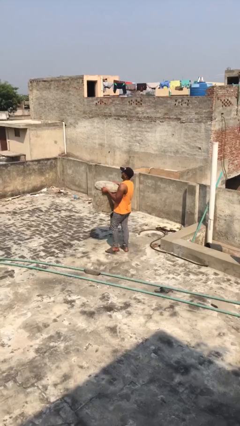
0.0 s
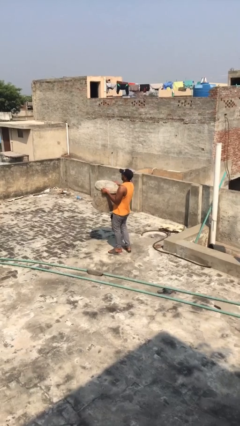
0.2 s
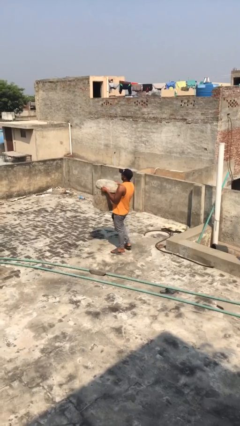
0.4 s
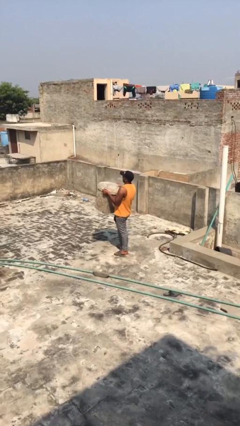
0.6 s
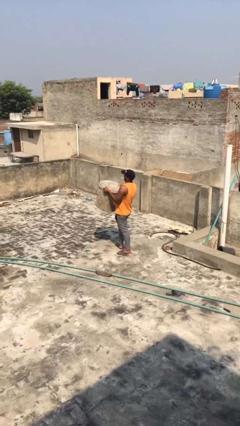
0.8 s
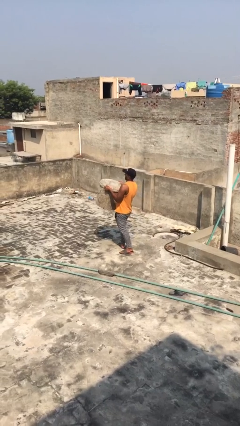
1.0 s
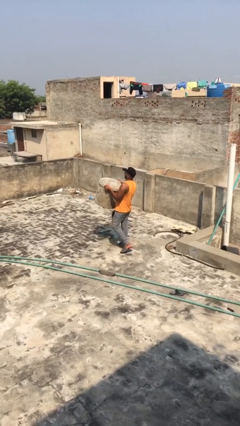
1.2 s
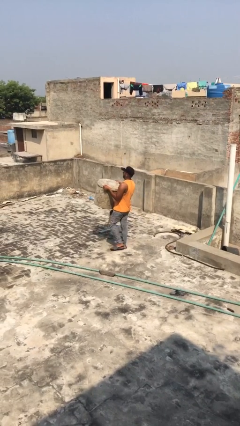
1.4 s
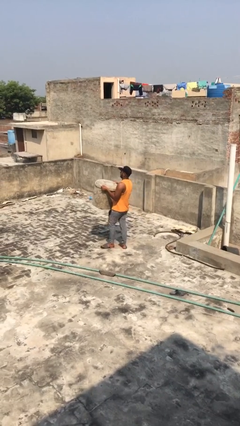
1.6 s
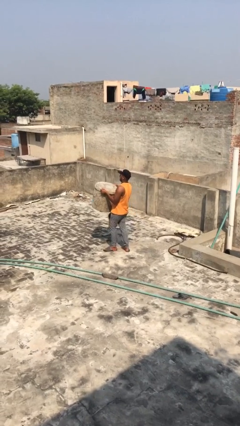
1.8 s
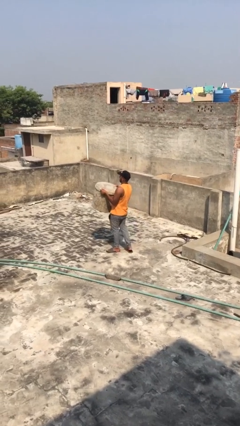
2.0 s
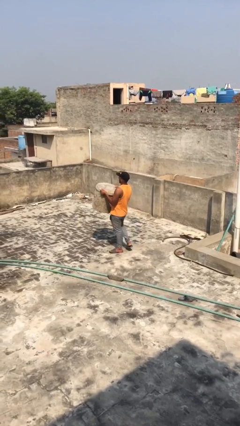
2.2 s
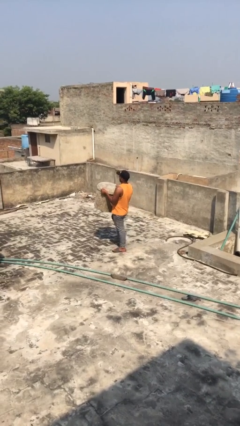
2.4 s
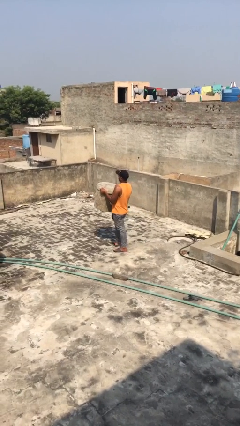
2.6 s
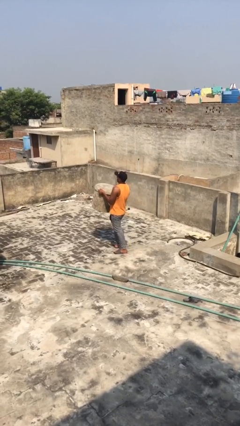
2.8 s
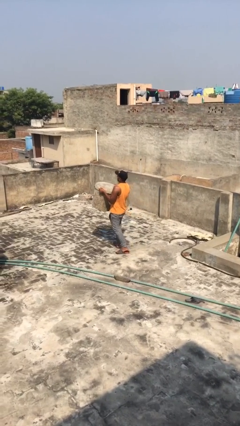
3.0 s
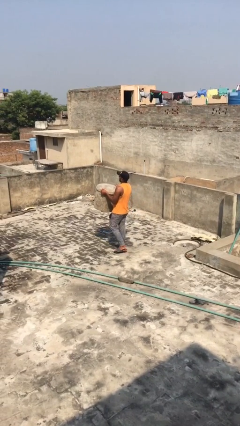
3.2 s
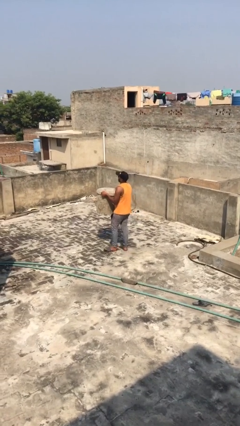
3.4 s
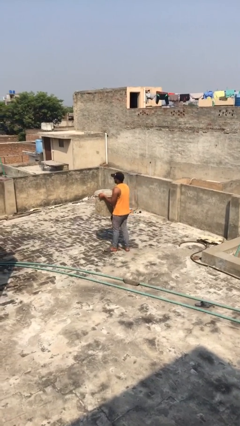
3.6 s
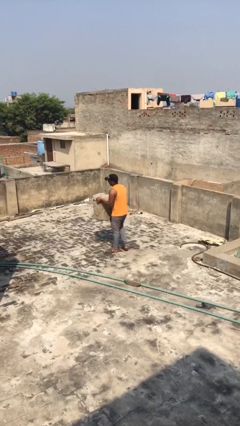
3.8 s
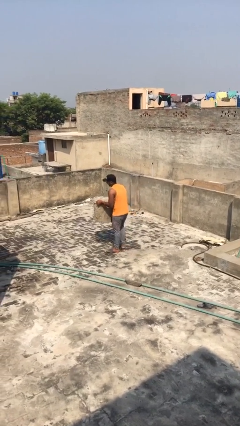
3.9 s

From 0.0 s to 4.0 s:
person carries heavy object

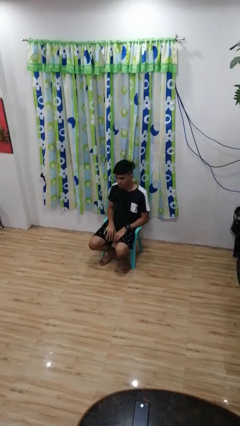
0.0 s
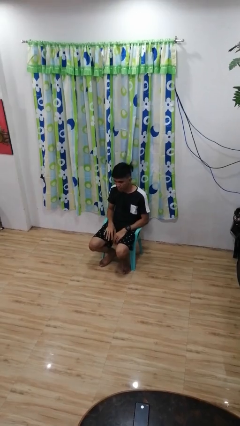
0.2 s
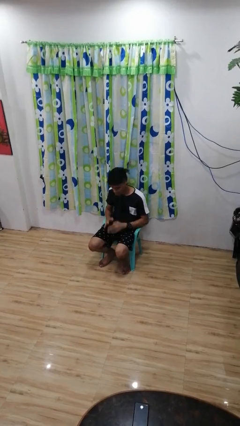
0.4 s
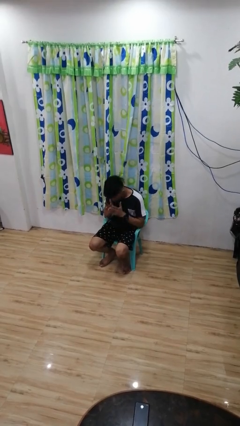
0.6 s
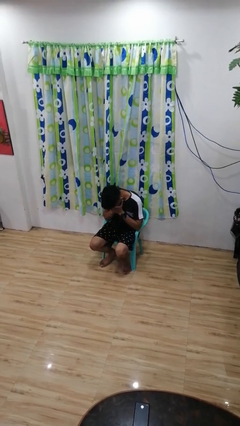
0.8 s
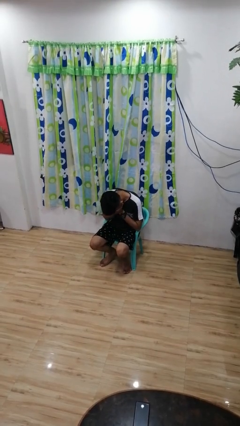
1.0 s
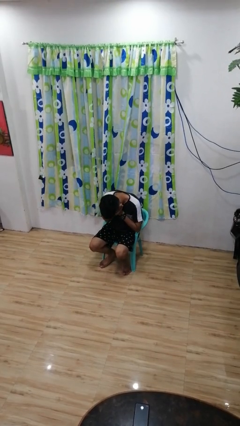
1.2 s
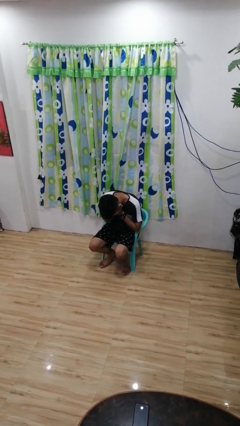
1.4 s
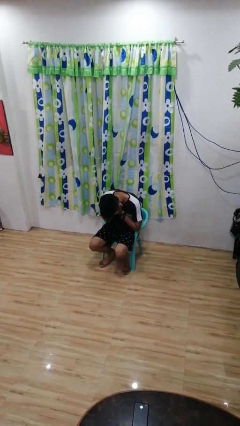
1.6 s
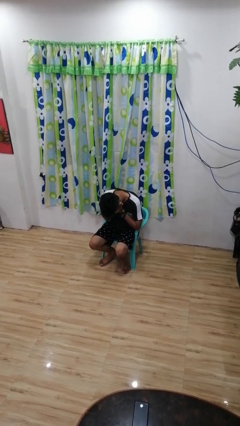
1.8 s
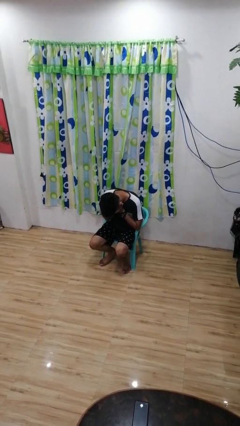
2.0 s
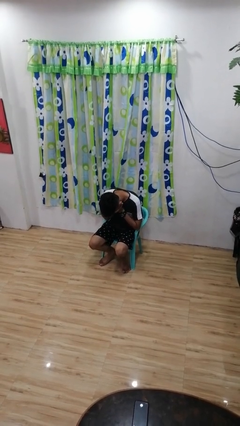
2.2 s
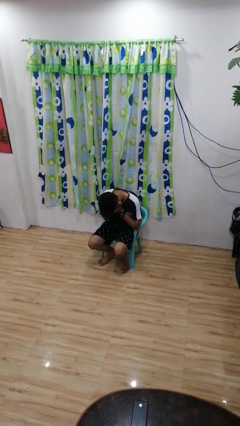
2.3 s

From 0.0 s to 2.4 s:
person covers face with hands

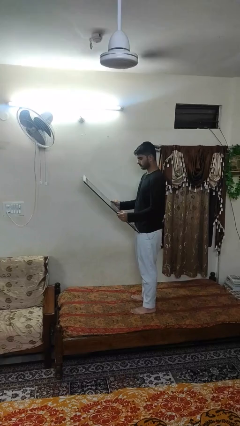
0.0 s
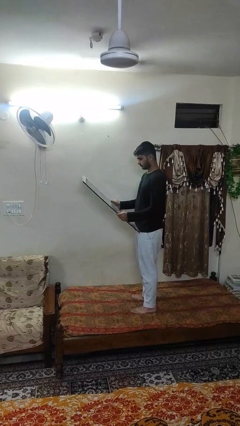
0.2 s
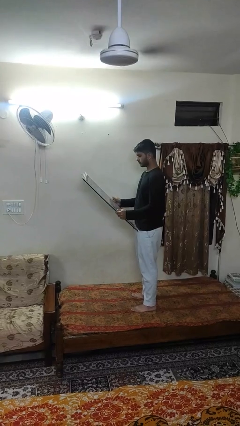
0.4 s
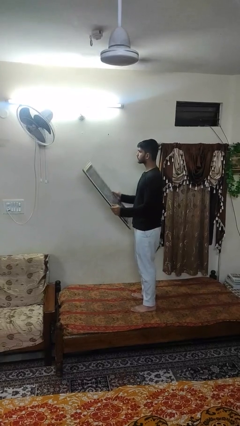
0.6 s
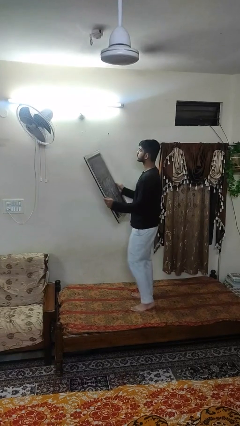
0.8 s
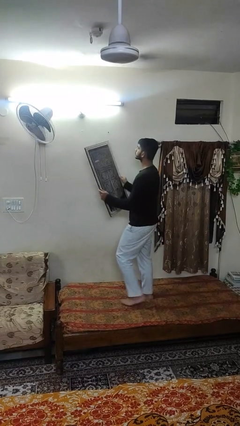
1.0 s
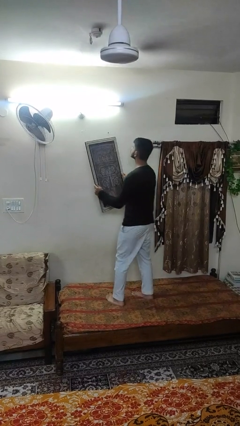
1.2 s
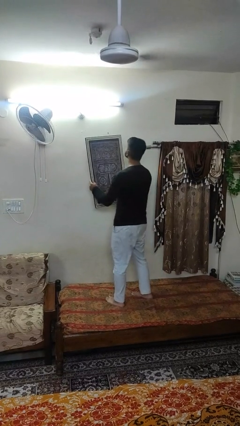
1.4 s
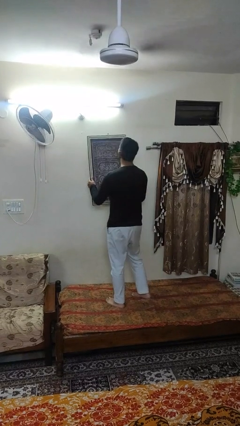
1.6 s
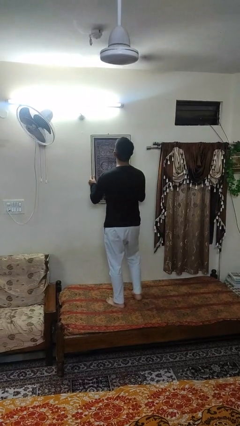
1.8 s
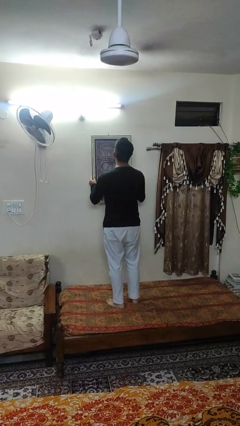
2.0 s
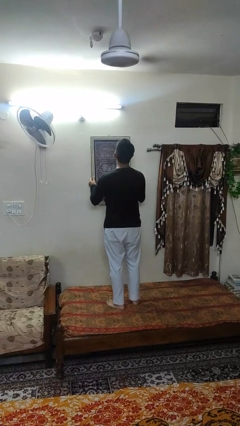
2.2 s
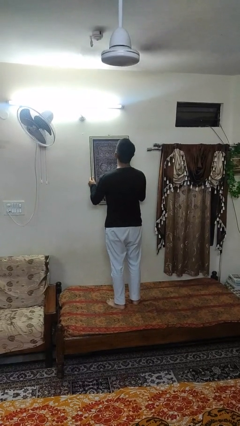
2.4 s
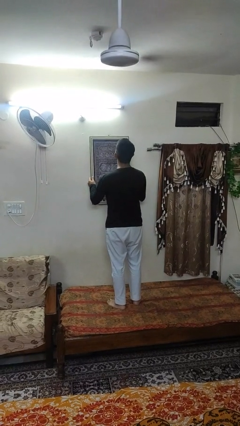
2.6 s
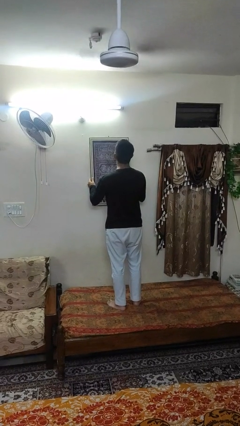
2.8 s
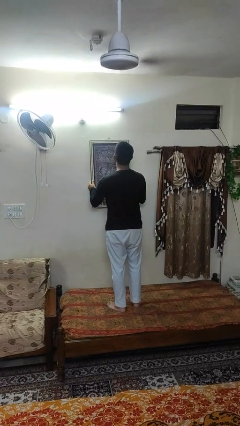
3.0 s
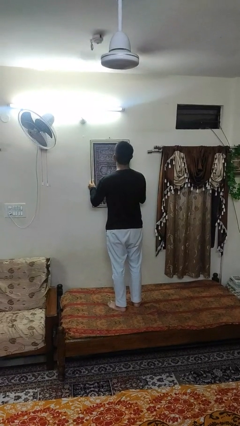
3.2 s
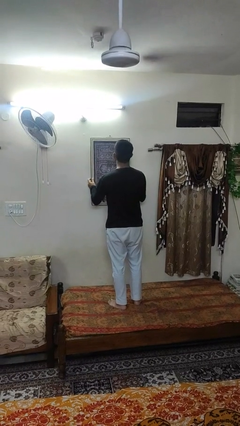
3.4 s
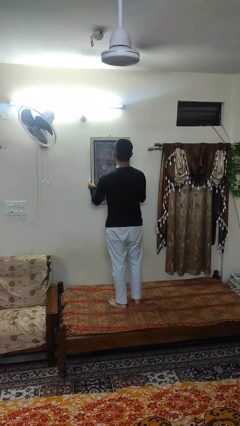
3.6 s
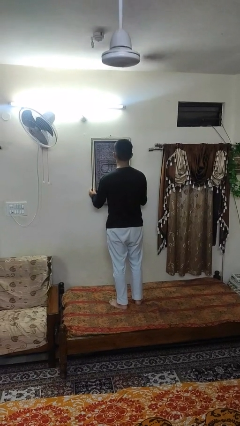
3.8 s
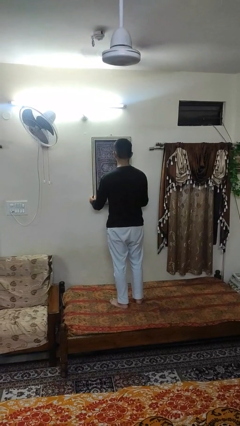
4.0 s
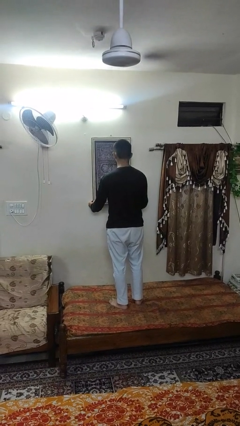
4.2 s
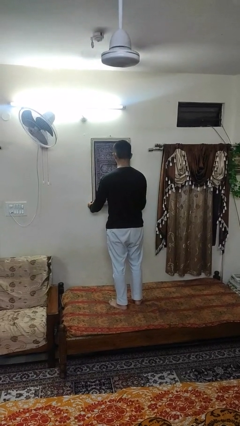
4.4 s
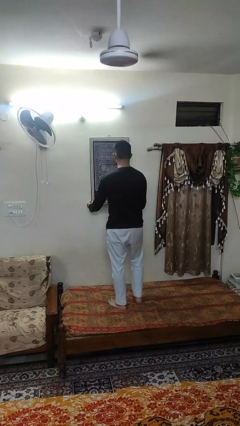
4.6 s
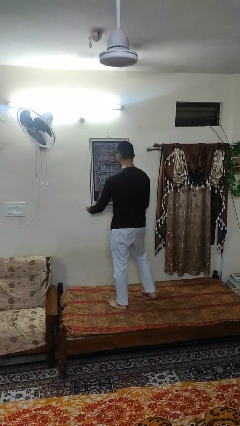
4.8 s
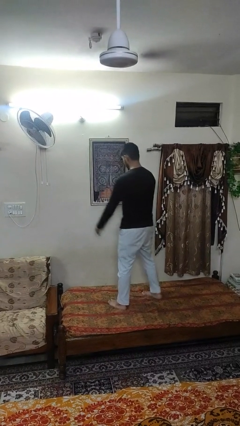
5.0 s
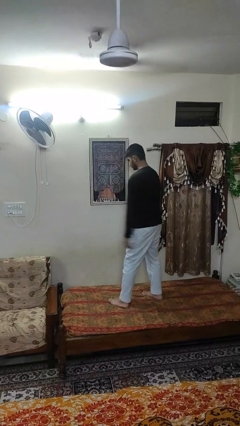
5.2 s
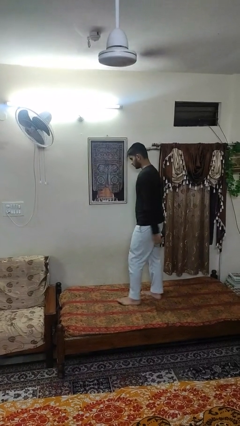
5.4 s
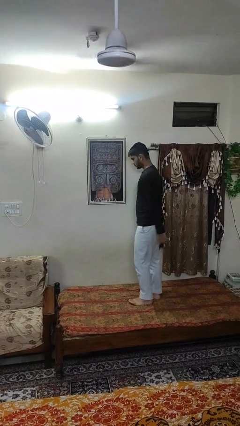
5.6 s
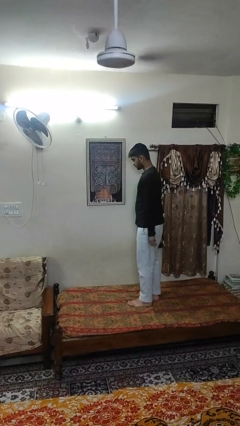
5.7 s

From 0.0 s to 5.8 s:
person puts up picture frame

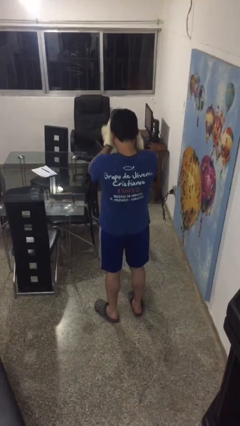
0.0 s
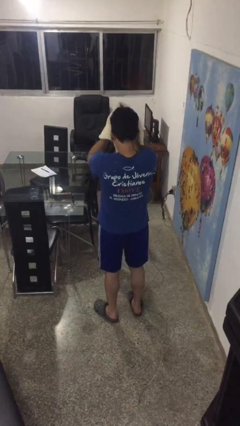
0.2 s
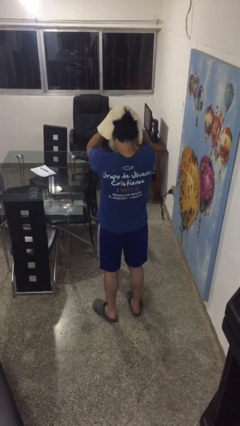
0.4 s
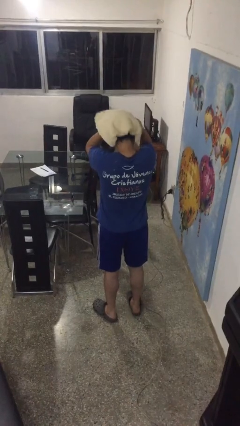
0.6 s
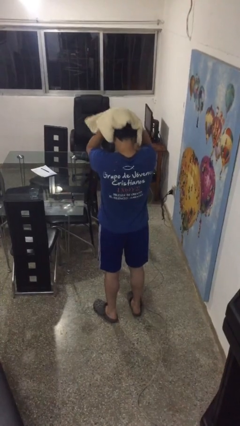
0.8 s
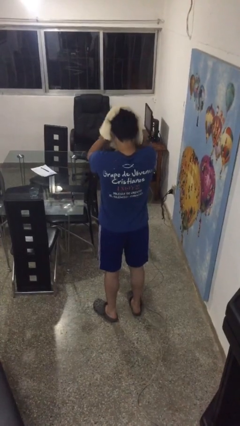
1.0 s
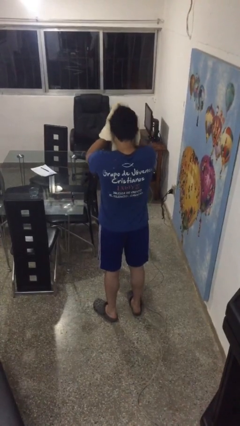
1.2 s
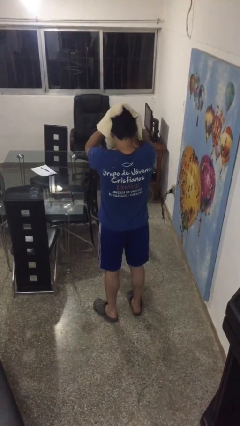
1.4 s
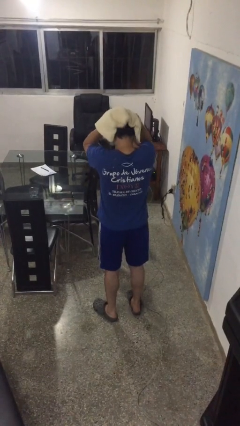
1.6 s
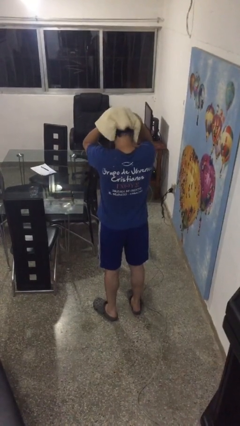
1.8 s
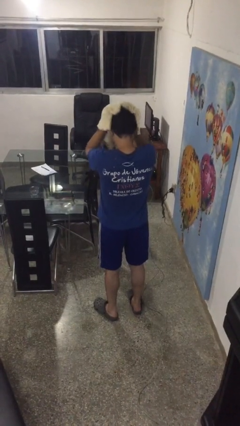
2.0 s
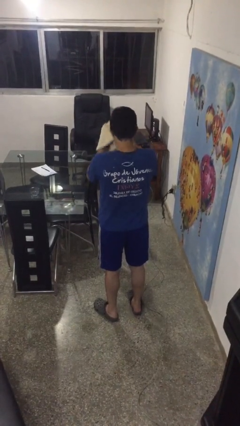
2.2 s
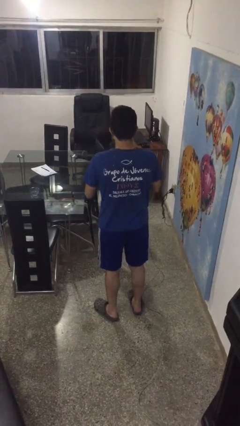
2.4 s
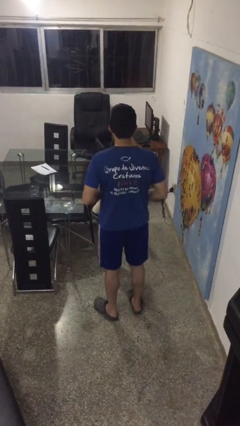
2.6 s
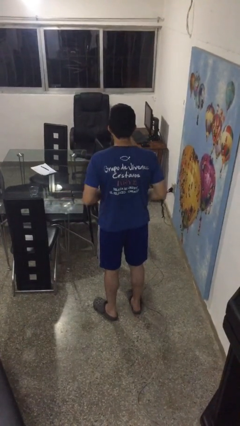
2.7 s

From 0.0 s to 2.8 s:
person dries hair with towel

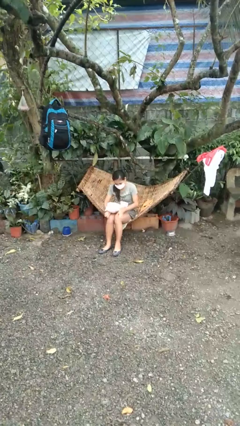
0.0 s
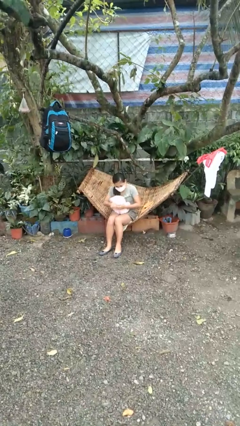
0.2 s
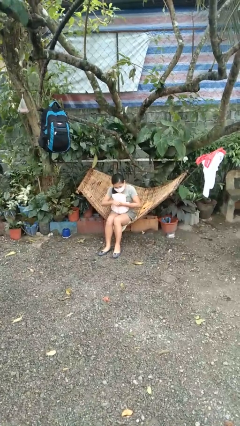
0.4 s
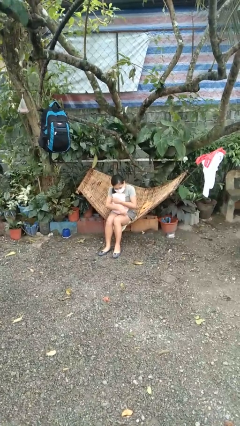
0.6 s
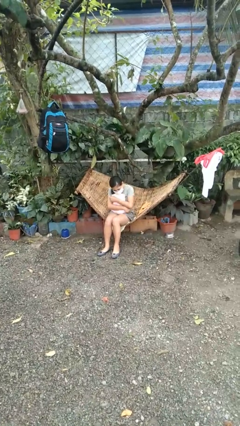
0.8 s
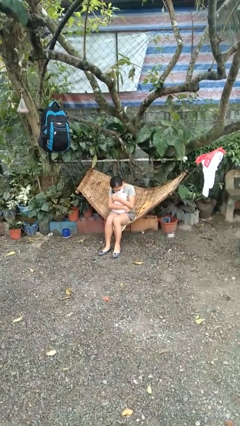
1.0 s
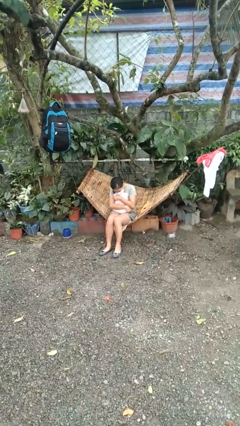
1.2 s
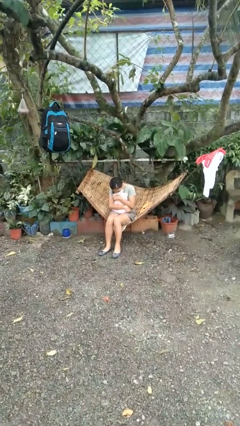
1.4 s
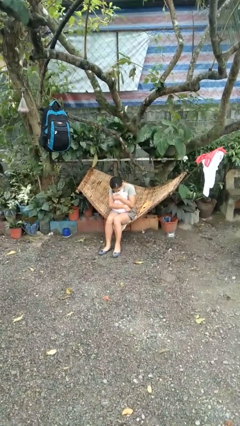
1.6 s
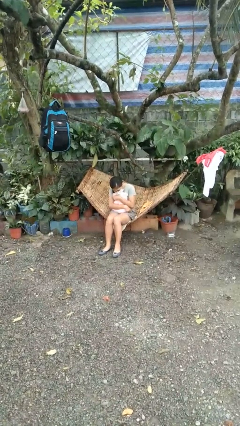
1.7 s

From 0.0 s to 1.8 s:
person hugs stuffed animal

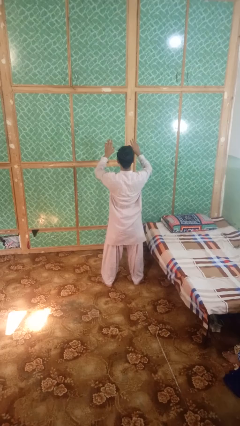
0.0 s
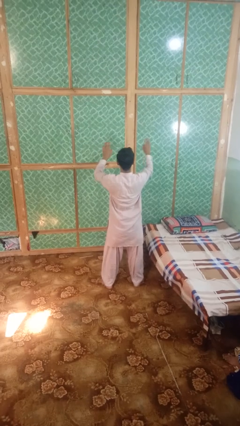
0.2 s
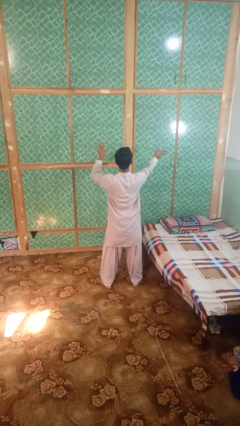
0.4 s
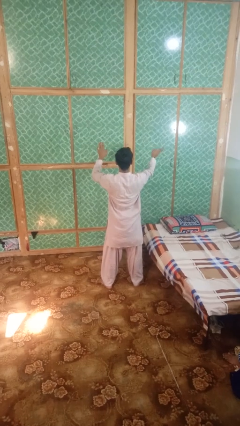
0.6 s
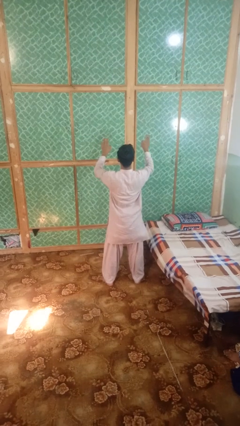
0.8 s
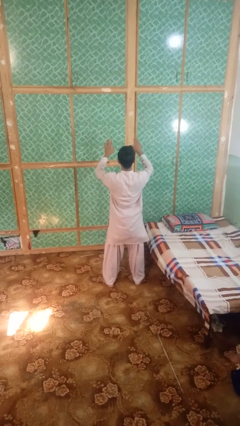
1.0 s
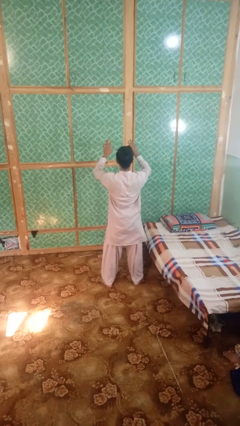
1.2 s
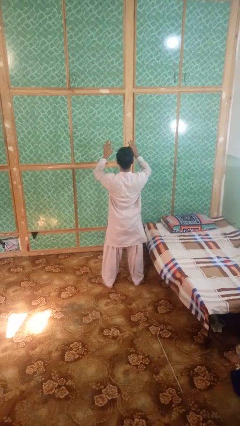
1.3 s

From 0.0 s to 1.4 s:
person gestures swipe right
